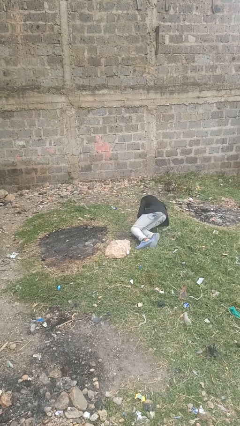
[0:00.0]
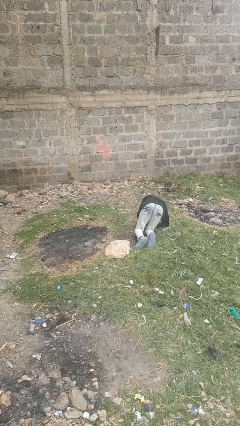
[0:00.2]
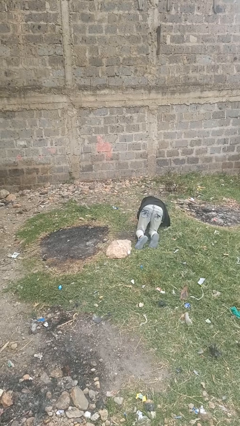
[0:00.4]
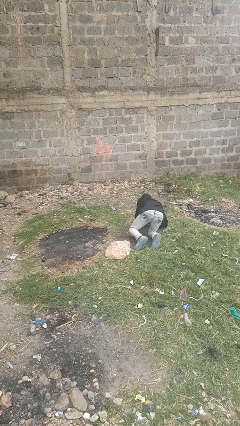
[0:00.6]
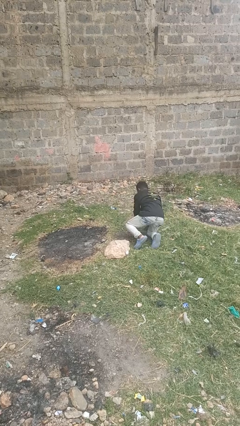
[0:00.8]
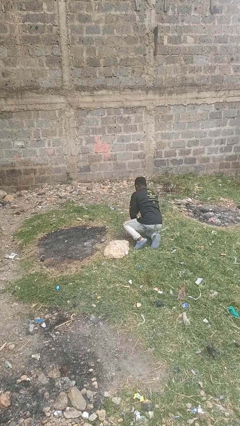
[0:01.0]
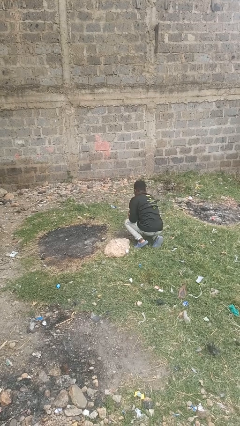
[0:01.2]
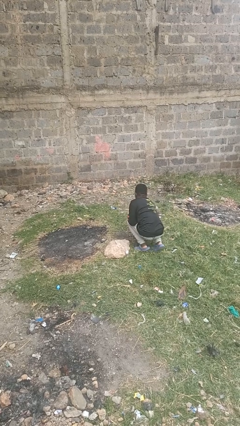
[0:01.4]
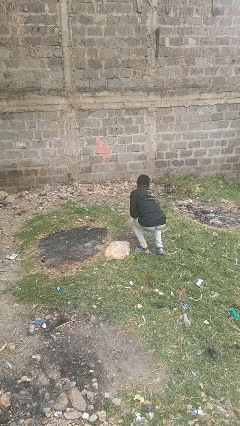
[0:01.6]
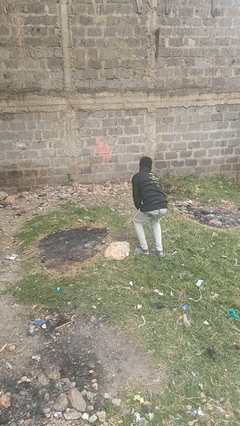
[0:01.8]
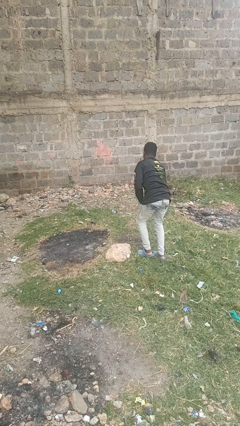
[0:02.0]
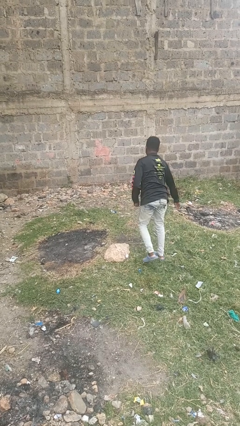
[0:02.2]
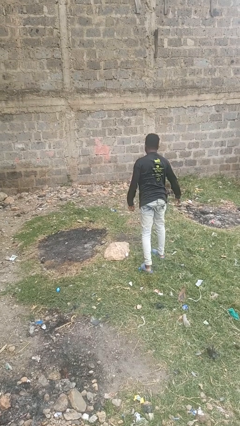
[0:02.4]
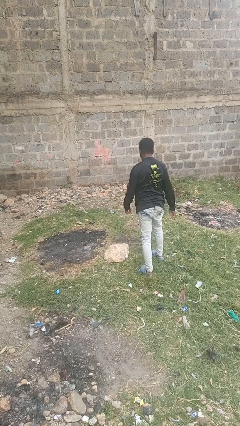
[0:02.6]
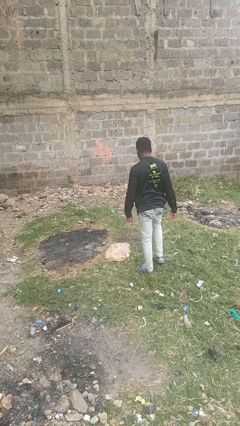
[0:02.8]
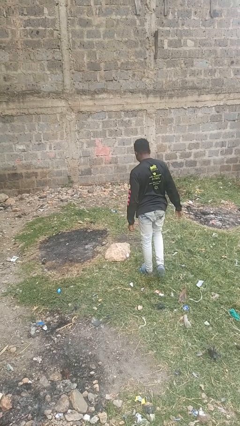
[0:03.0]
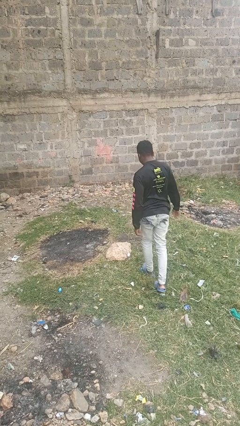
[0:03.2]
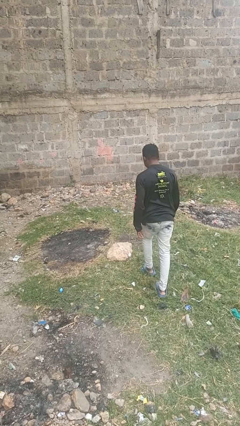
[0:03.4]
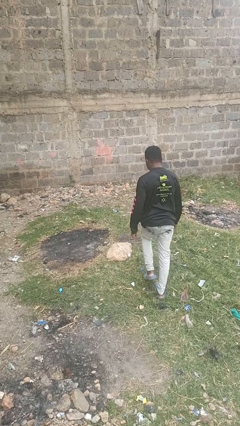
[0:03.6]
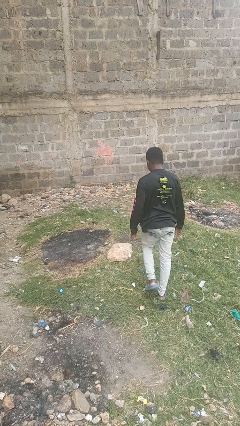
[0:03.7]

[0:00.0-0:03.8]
person stands up from floor

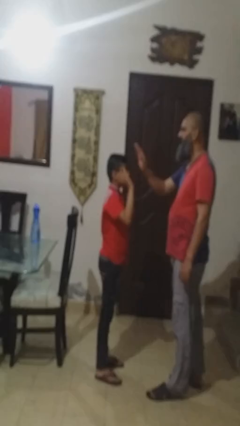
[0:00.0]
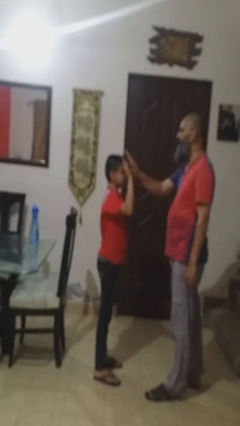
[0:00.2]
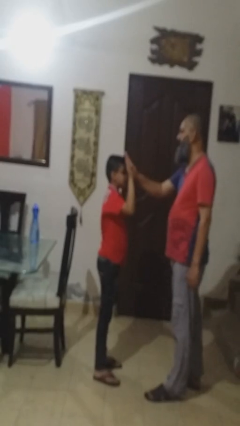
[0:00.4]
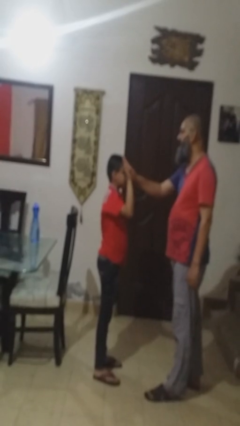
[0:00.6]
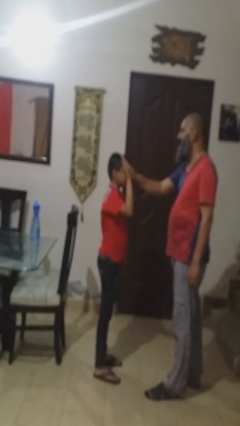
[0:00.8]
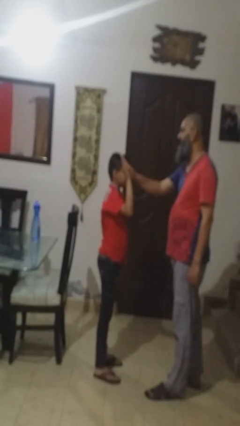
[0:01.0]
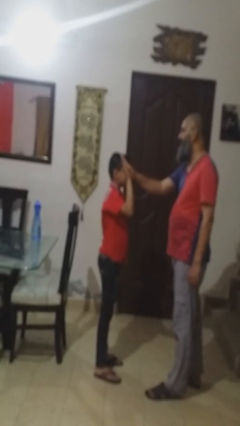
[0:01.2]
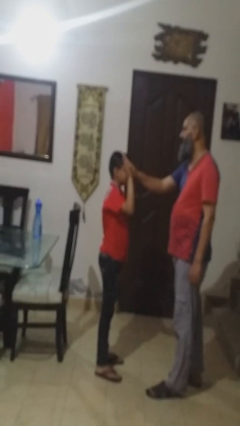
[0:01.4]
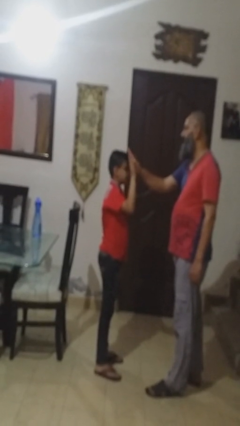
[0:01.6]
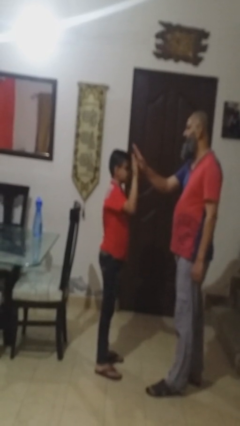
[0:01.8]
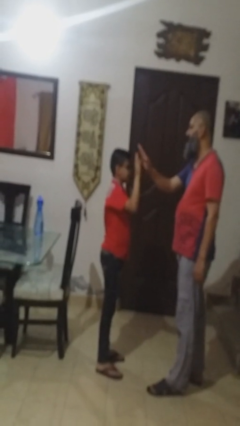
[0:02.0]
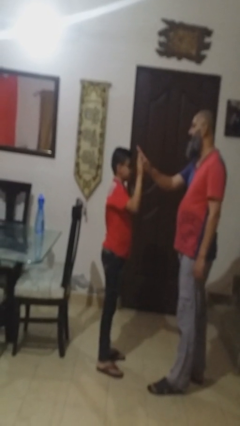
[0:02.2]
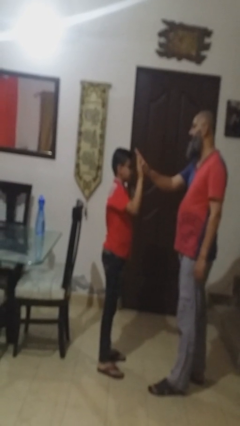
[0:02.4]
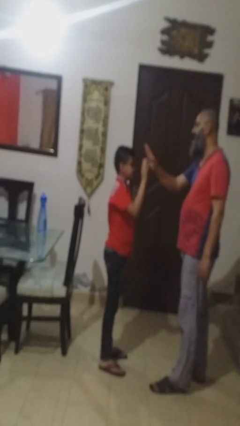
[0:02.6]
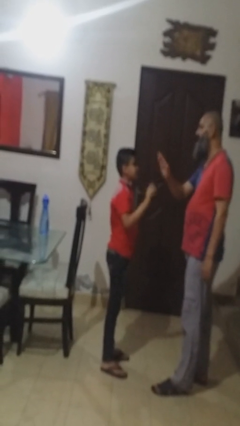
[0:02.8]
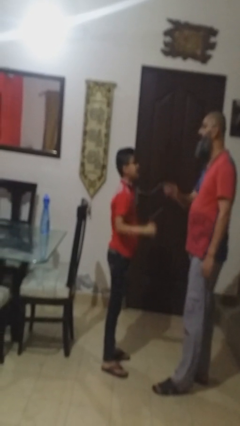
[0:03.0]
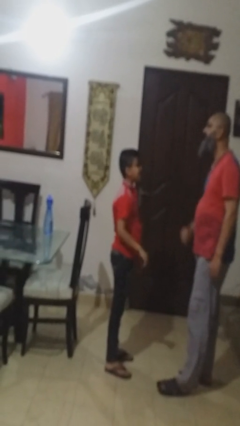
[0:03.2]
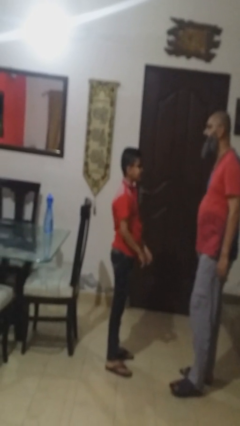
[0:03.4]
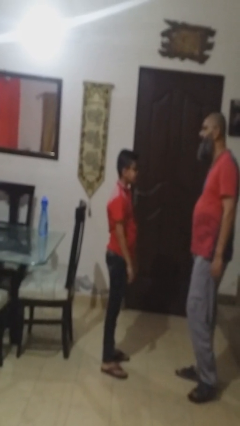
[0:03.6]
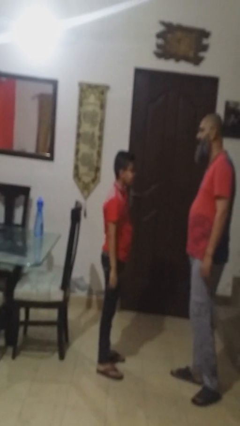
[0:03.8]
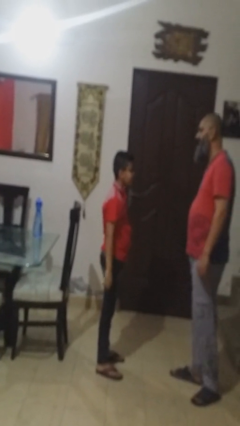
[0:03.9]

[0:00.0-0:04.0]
person highfives hand

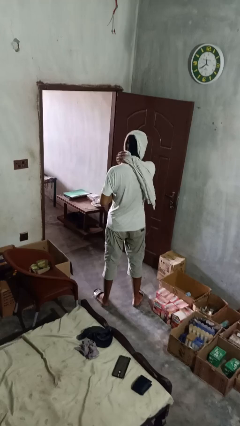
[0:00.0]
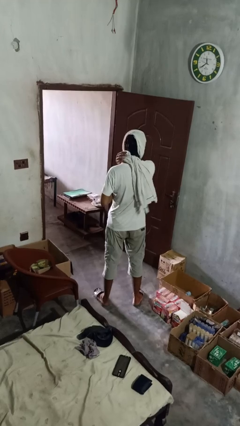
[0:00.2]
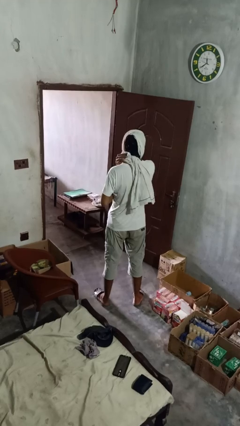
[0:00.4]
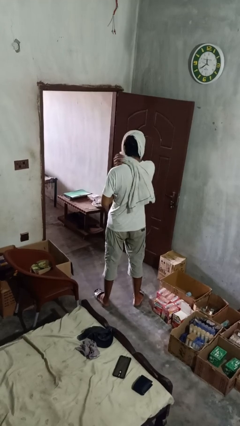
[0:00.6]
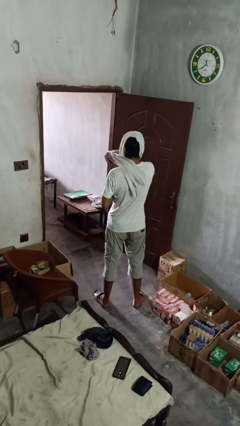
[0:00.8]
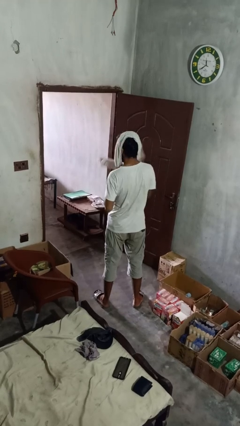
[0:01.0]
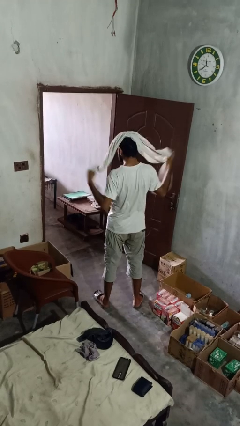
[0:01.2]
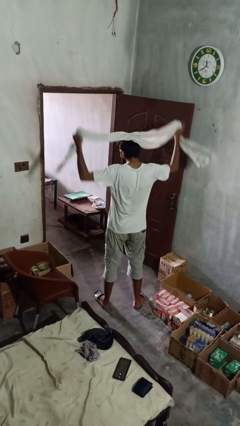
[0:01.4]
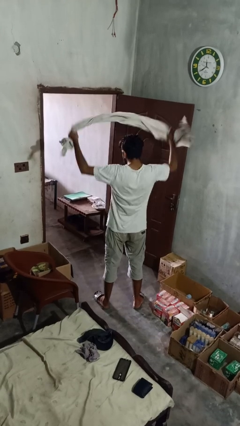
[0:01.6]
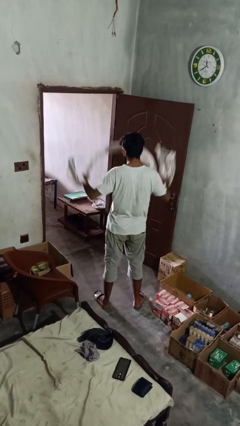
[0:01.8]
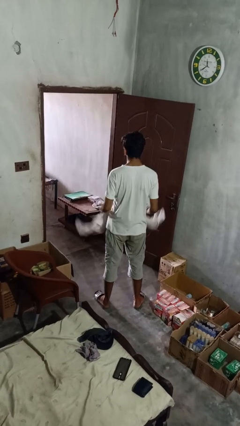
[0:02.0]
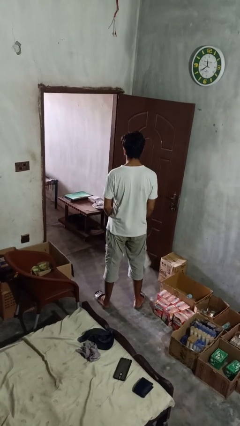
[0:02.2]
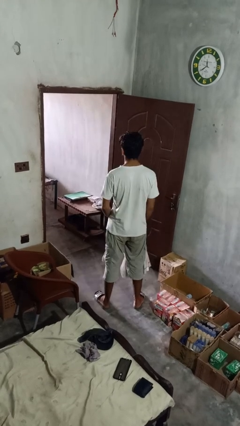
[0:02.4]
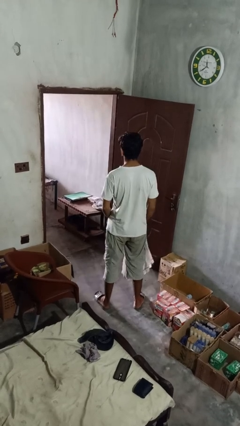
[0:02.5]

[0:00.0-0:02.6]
person takes off scarf

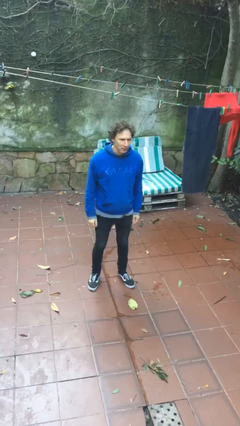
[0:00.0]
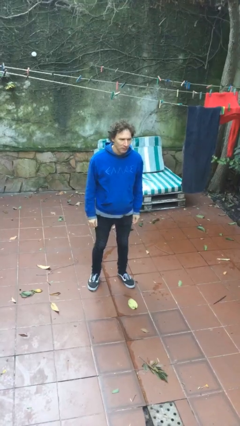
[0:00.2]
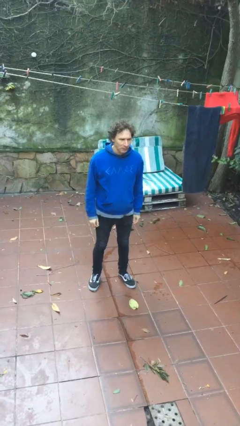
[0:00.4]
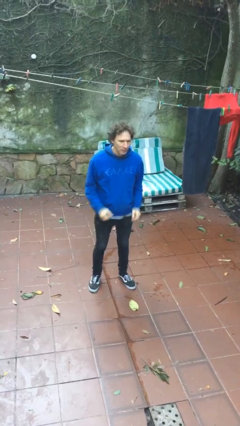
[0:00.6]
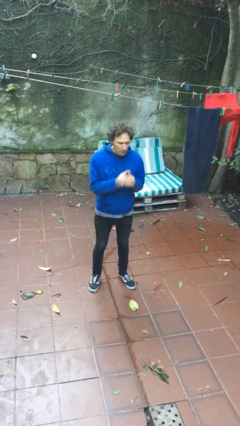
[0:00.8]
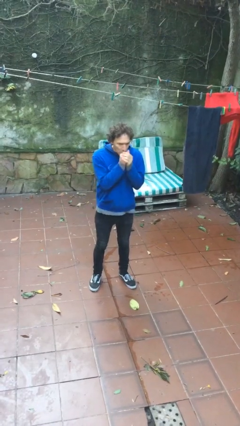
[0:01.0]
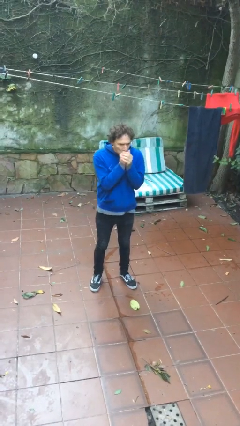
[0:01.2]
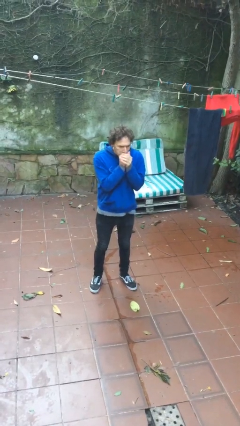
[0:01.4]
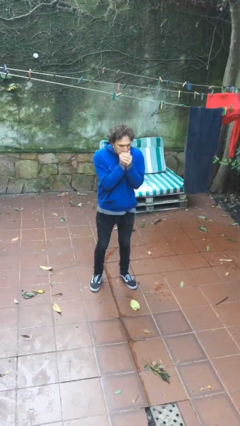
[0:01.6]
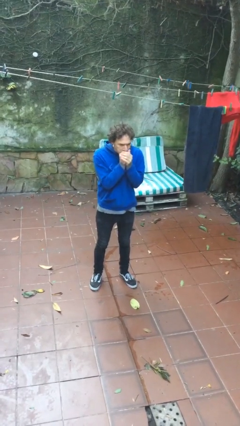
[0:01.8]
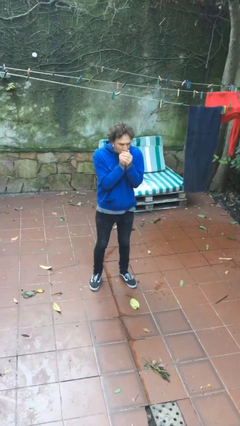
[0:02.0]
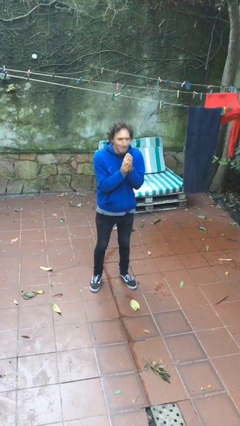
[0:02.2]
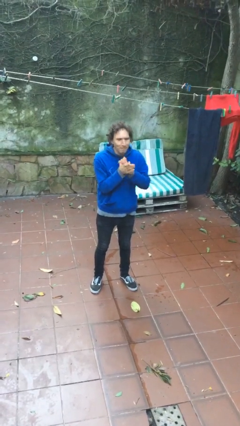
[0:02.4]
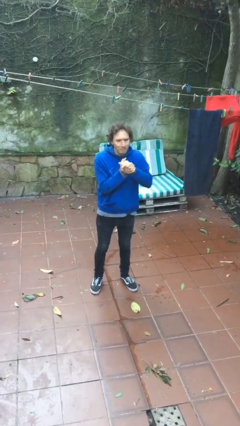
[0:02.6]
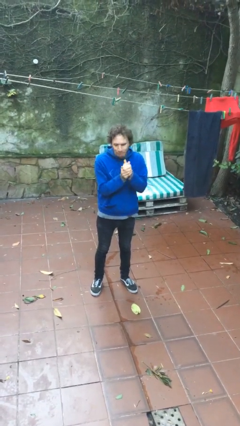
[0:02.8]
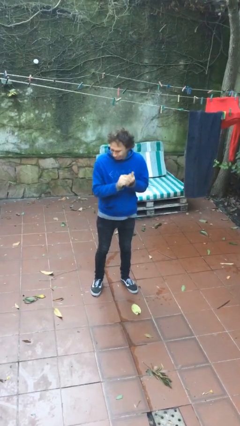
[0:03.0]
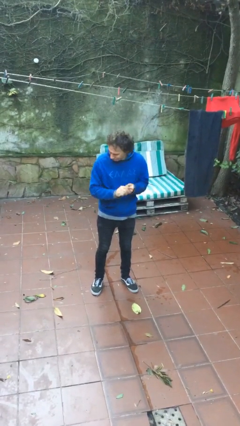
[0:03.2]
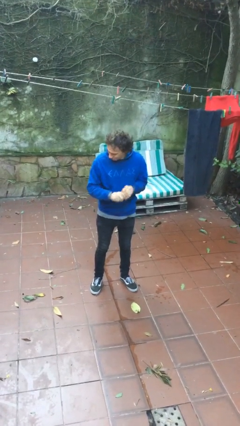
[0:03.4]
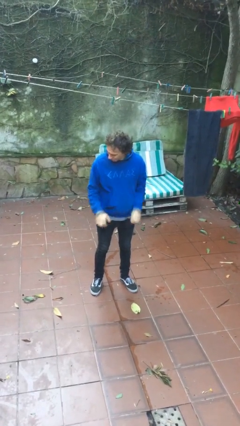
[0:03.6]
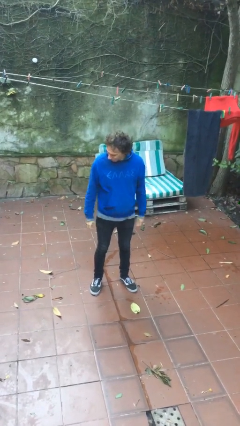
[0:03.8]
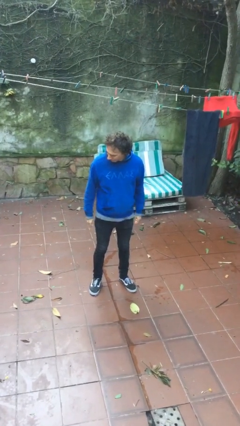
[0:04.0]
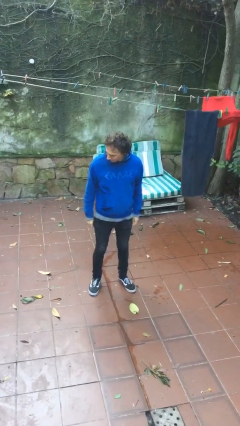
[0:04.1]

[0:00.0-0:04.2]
person blows into hands

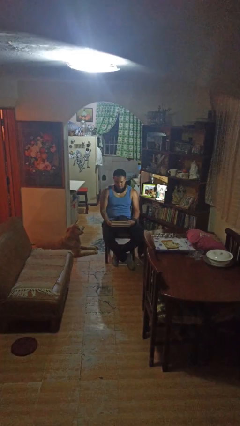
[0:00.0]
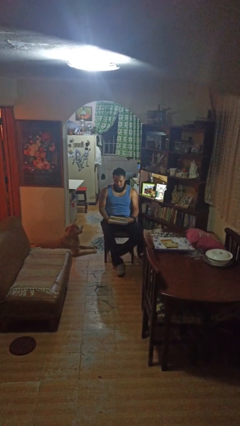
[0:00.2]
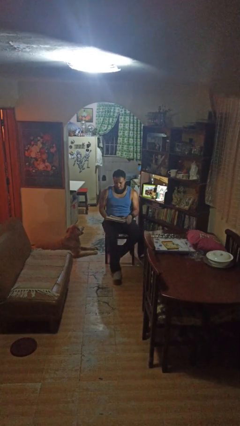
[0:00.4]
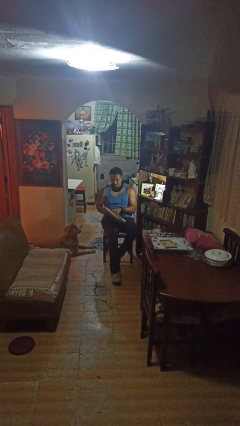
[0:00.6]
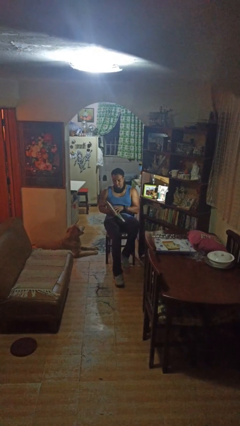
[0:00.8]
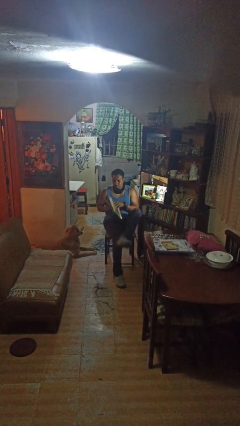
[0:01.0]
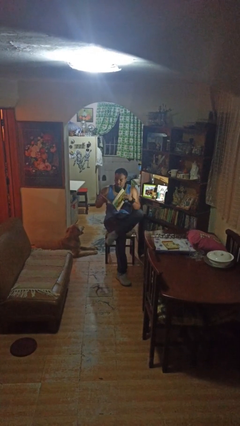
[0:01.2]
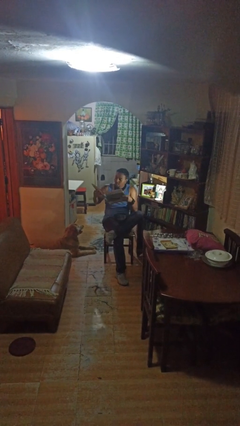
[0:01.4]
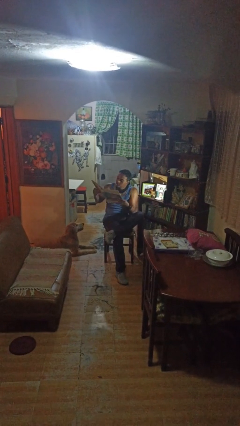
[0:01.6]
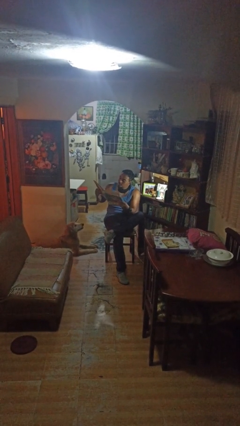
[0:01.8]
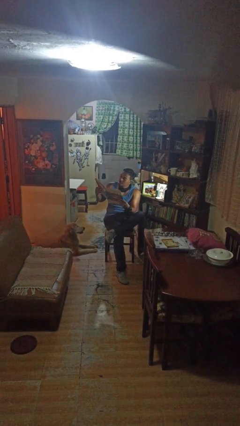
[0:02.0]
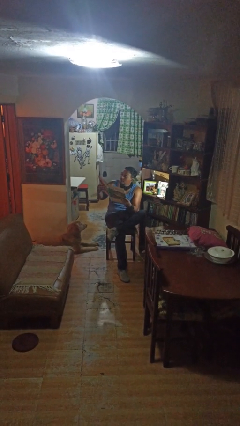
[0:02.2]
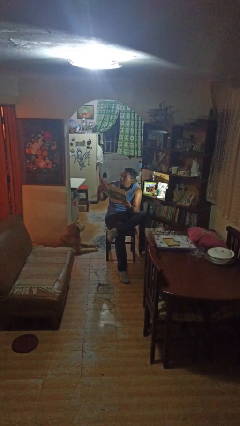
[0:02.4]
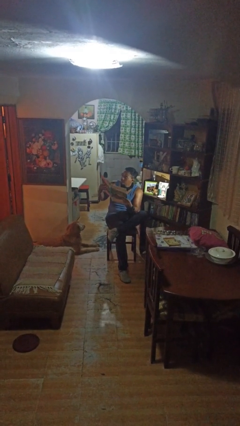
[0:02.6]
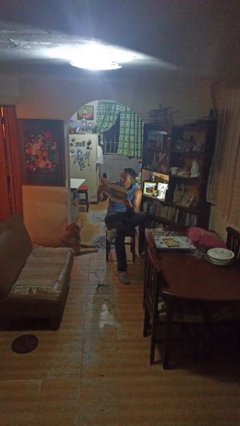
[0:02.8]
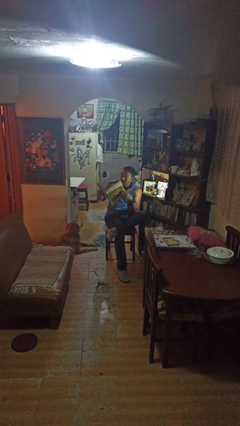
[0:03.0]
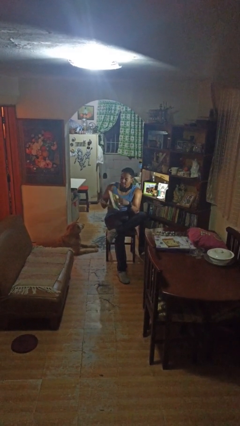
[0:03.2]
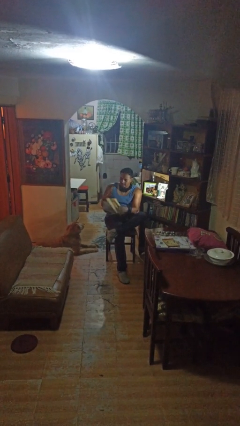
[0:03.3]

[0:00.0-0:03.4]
person reads document
